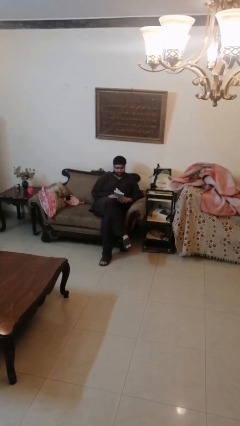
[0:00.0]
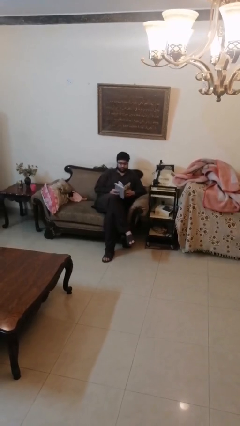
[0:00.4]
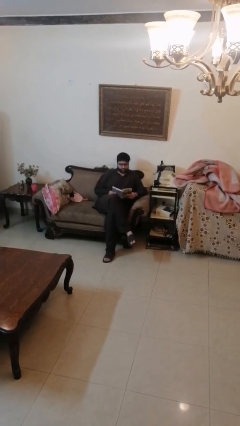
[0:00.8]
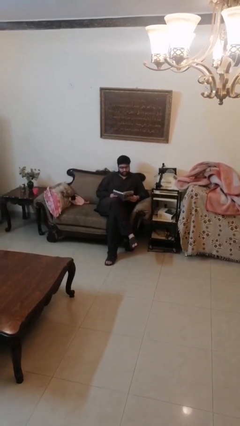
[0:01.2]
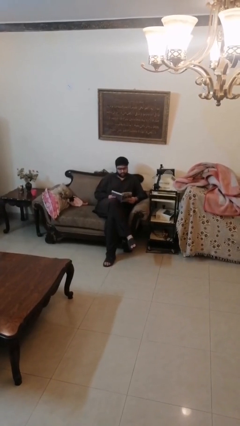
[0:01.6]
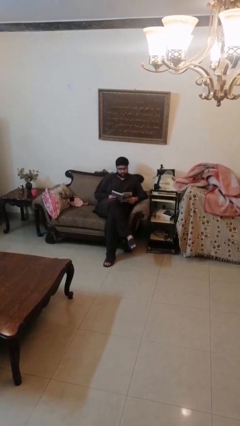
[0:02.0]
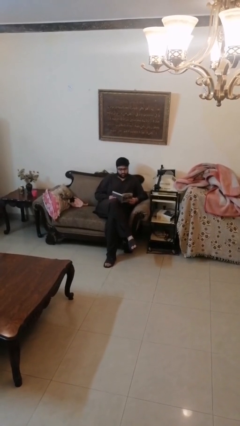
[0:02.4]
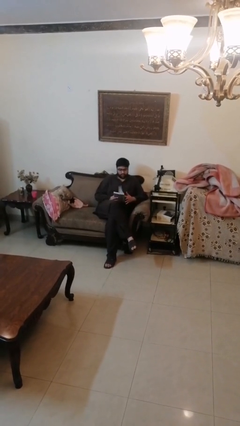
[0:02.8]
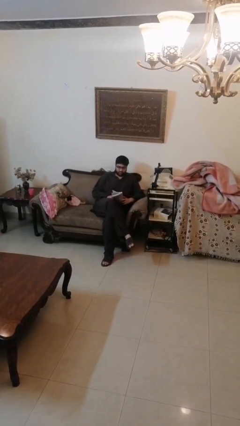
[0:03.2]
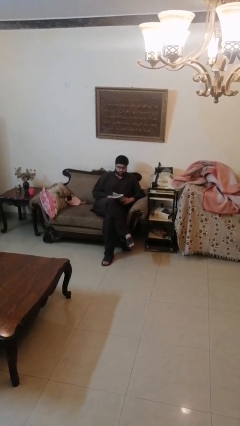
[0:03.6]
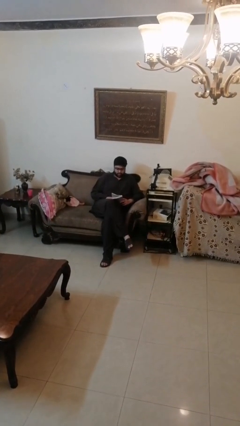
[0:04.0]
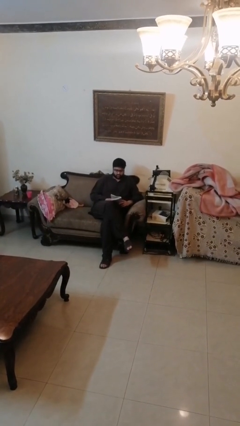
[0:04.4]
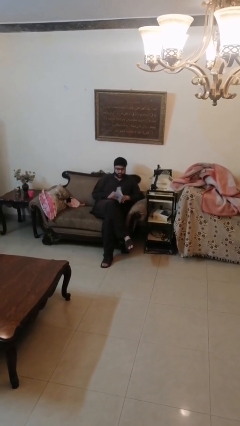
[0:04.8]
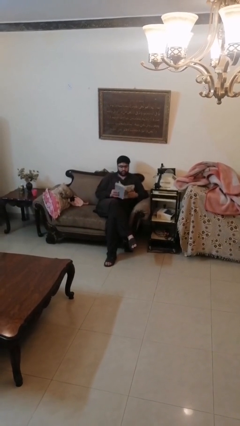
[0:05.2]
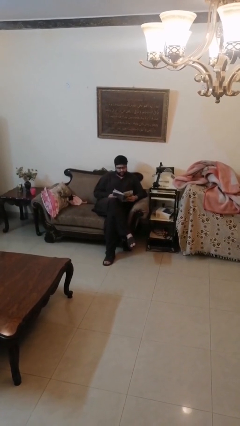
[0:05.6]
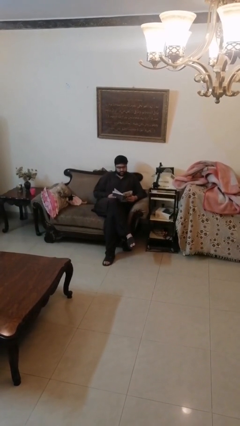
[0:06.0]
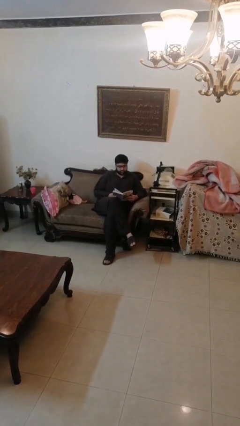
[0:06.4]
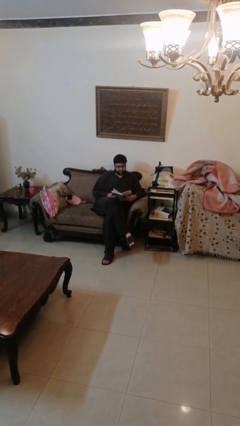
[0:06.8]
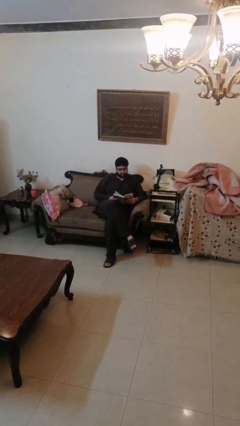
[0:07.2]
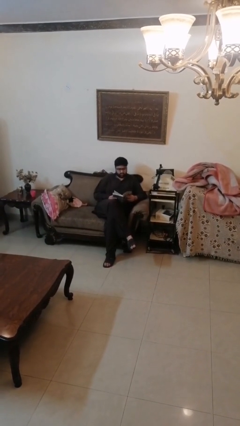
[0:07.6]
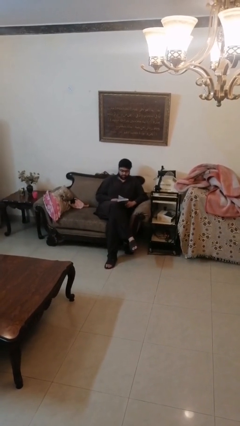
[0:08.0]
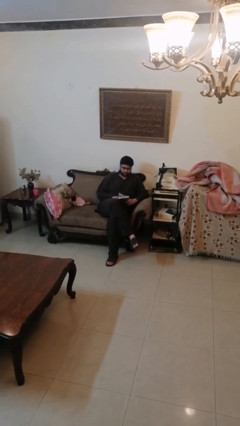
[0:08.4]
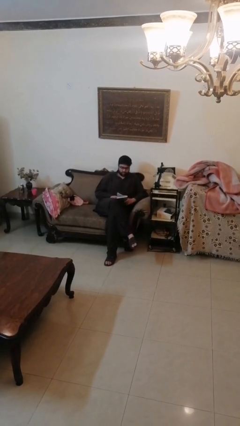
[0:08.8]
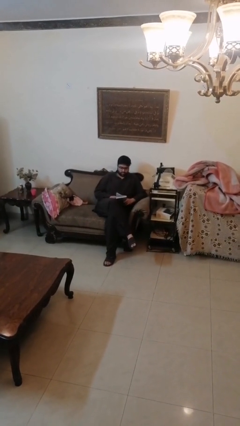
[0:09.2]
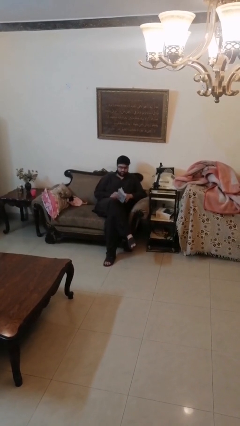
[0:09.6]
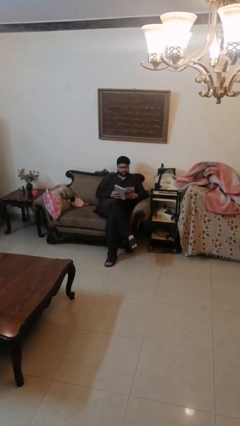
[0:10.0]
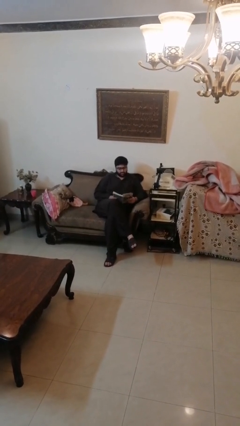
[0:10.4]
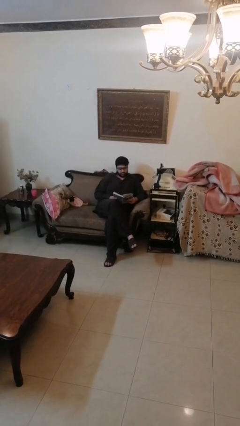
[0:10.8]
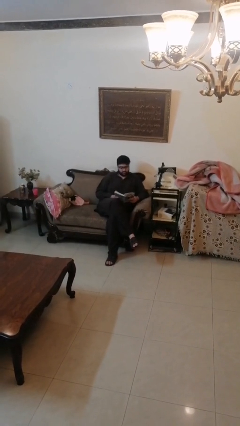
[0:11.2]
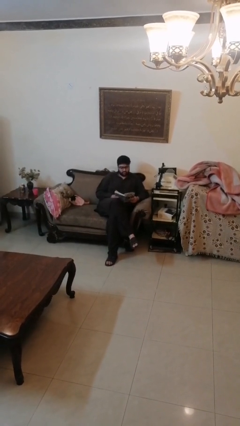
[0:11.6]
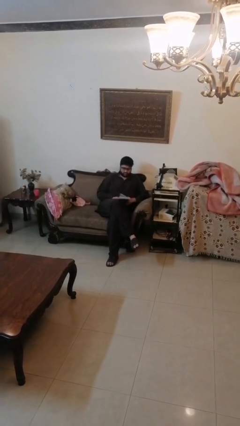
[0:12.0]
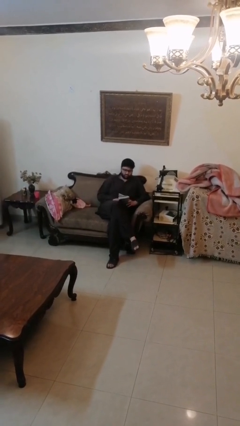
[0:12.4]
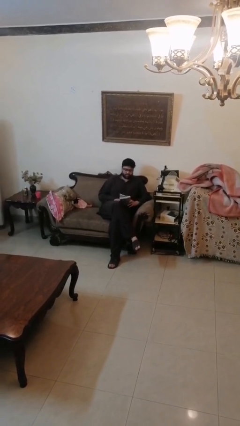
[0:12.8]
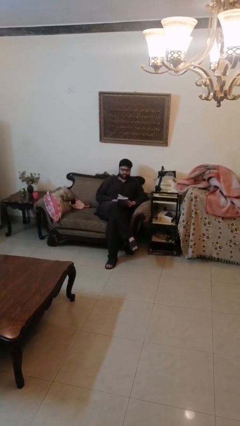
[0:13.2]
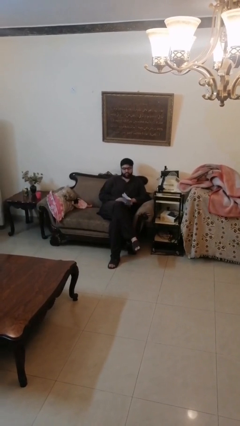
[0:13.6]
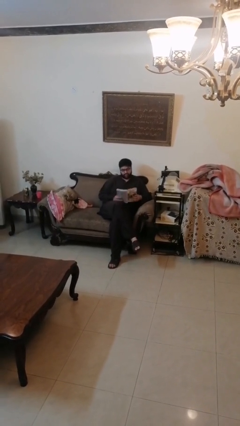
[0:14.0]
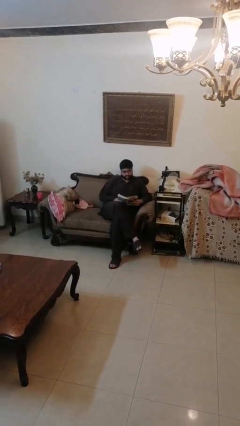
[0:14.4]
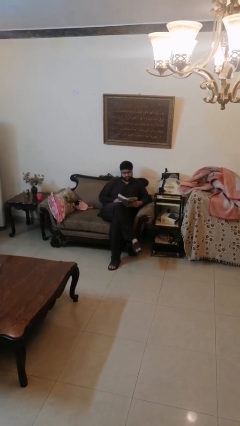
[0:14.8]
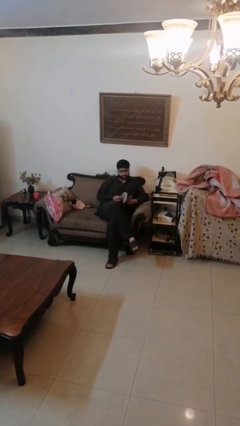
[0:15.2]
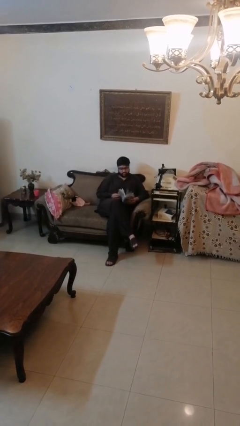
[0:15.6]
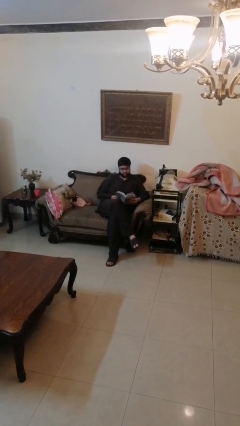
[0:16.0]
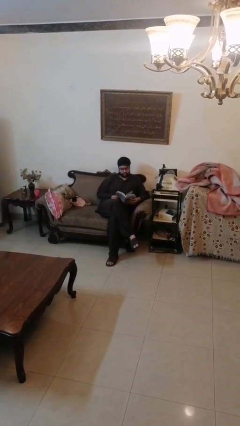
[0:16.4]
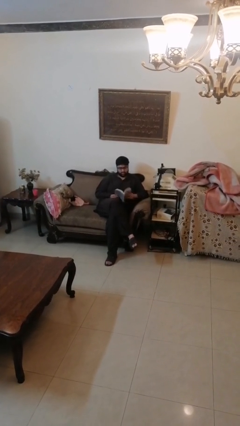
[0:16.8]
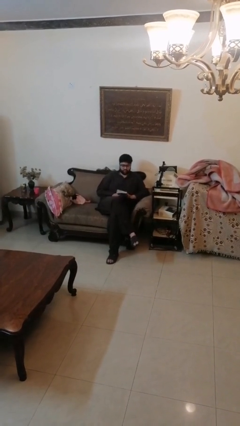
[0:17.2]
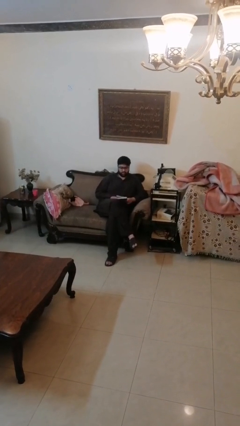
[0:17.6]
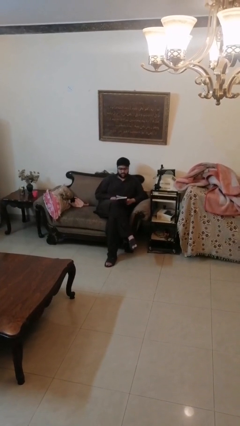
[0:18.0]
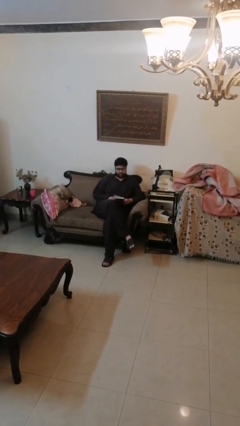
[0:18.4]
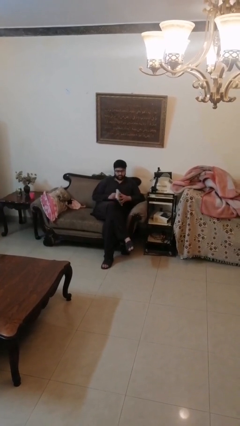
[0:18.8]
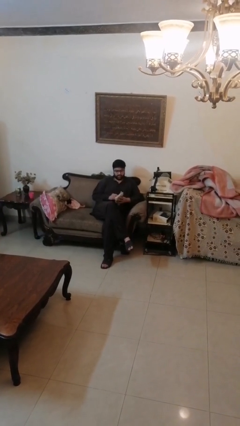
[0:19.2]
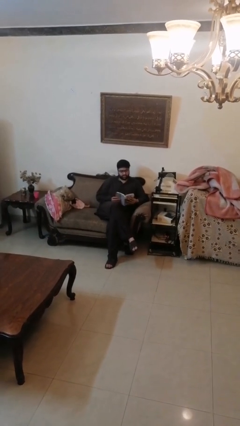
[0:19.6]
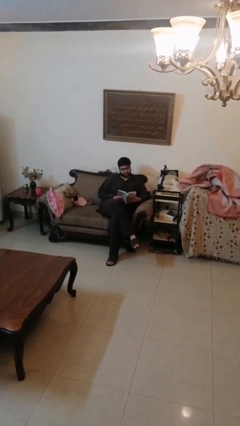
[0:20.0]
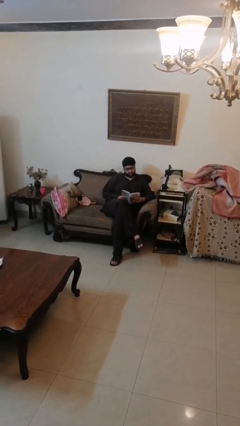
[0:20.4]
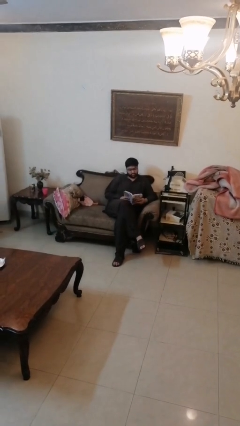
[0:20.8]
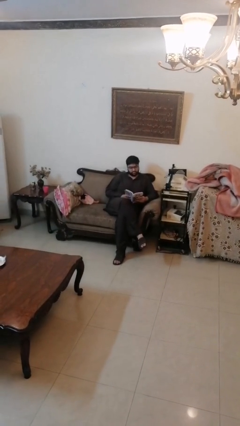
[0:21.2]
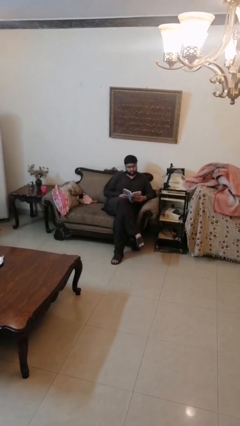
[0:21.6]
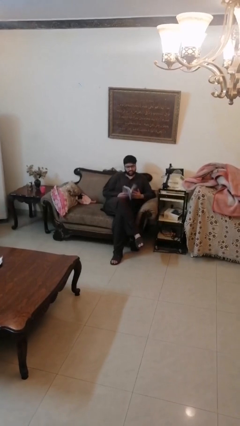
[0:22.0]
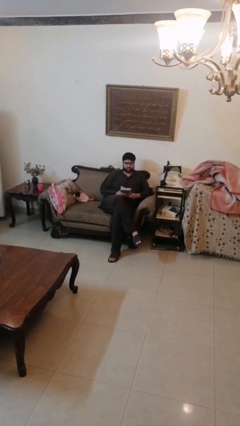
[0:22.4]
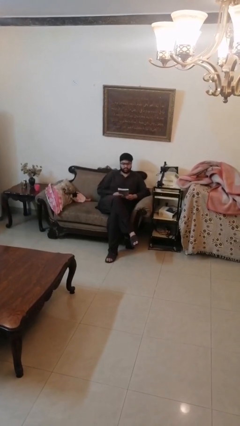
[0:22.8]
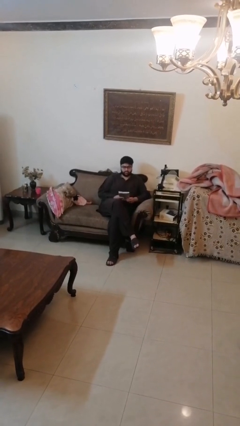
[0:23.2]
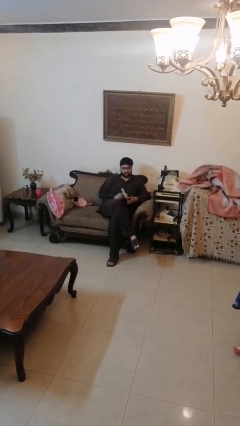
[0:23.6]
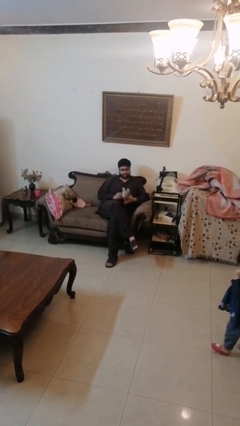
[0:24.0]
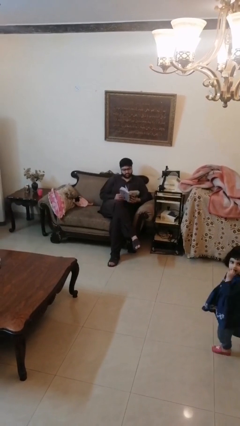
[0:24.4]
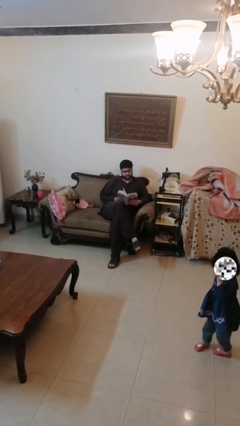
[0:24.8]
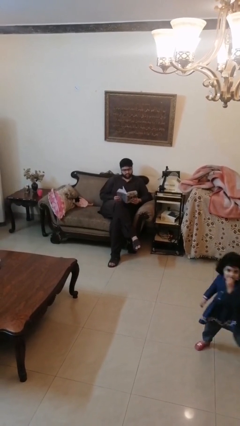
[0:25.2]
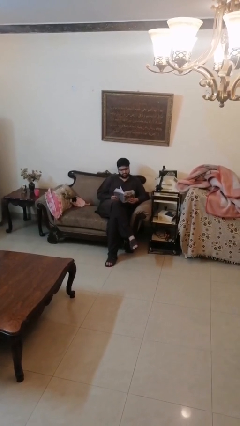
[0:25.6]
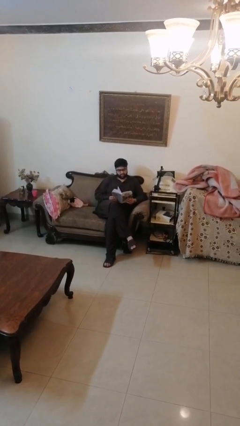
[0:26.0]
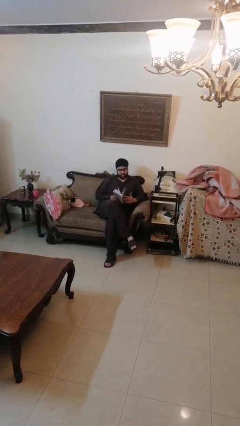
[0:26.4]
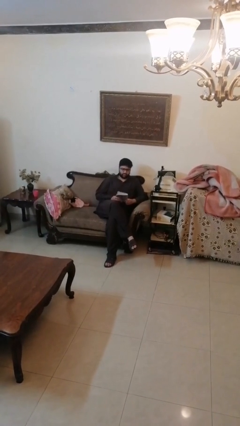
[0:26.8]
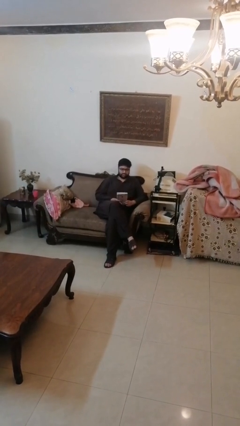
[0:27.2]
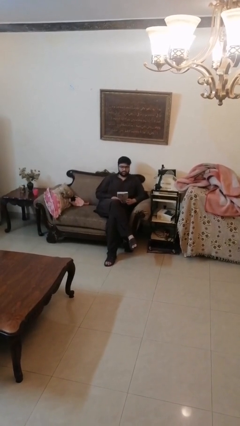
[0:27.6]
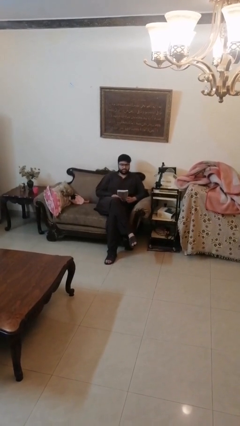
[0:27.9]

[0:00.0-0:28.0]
person reads document

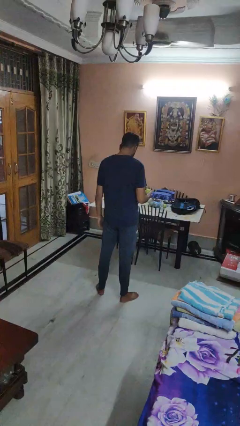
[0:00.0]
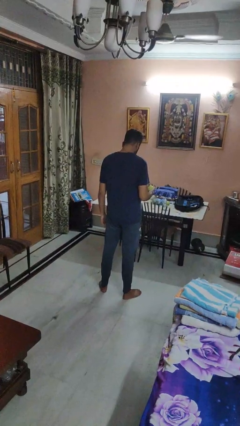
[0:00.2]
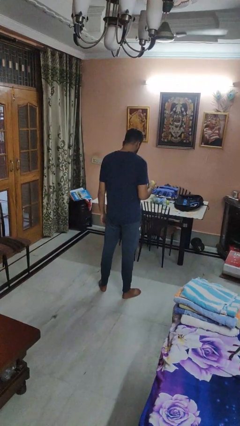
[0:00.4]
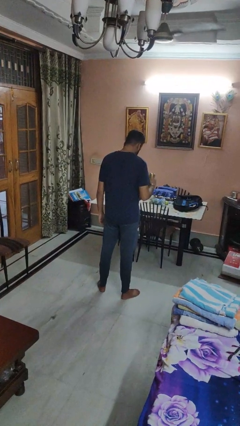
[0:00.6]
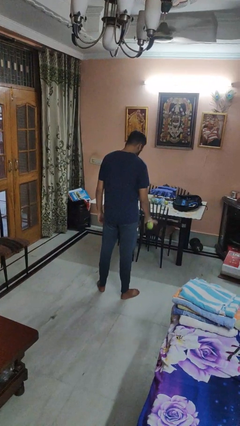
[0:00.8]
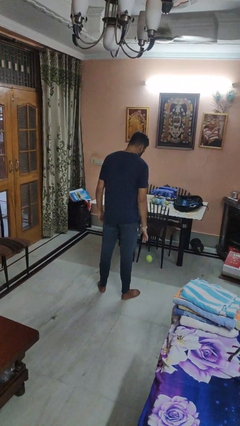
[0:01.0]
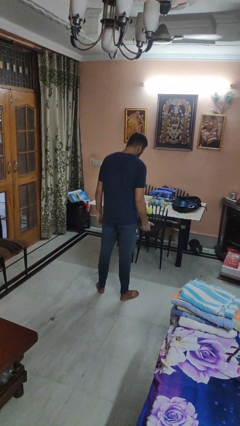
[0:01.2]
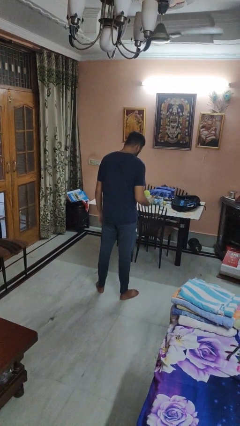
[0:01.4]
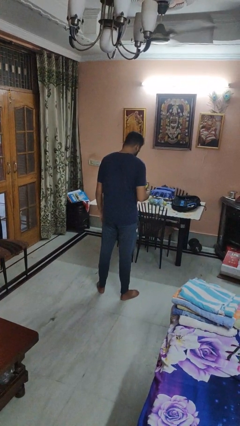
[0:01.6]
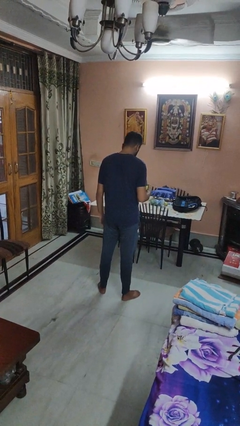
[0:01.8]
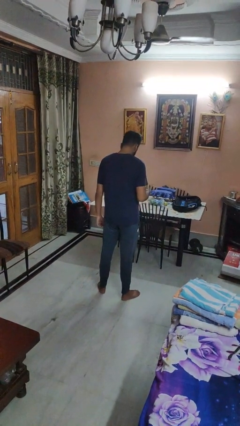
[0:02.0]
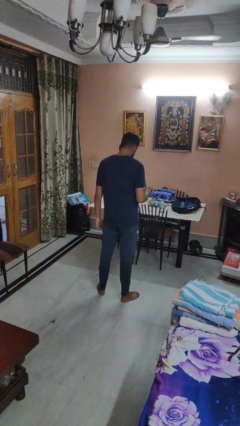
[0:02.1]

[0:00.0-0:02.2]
person bounces ball on floor

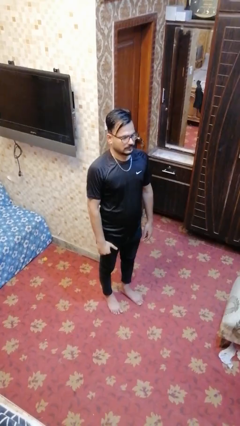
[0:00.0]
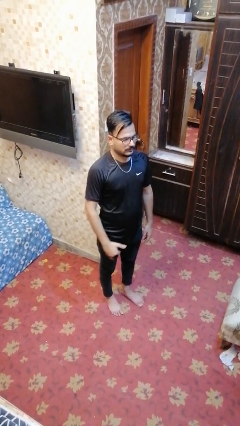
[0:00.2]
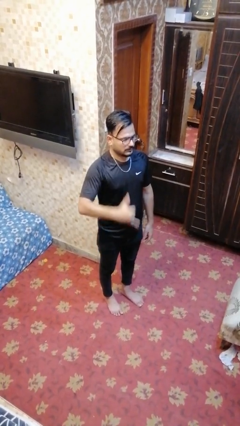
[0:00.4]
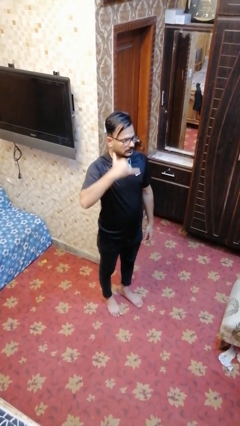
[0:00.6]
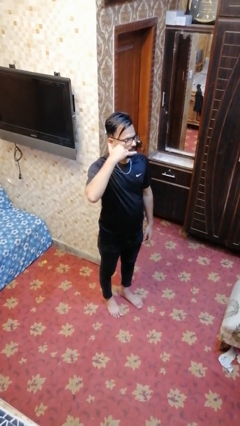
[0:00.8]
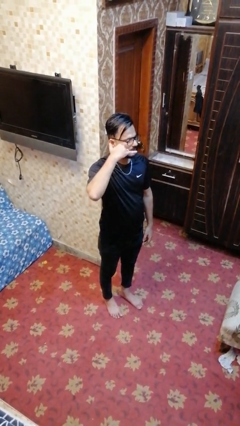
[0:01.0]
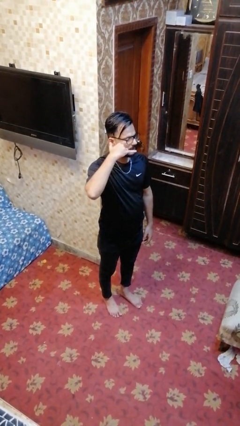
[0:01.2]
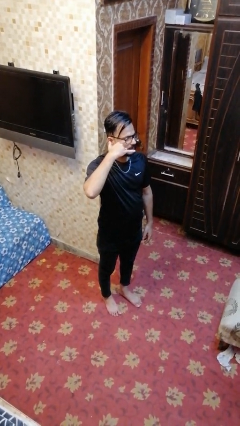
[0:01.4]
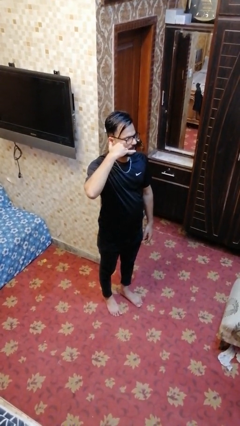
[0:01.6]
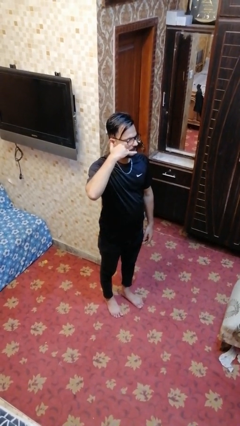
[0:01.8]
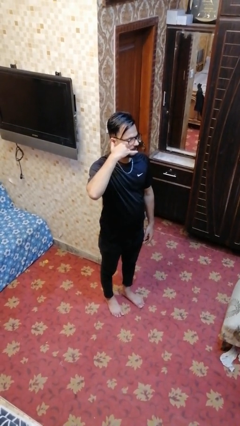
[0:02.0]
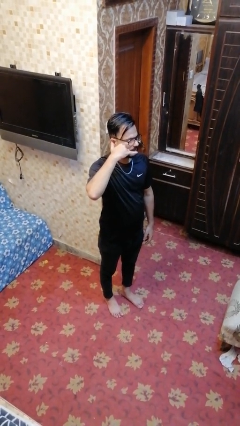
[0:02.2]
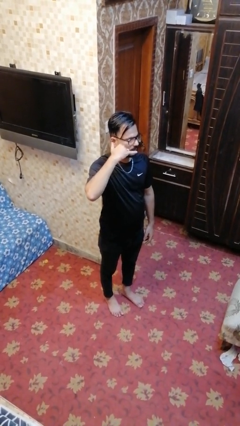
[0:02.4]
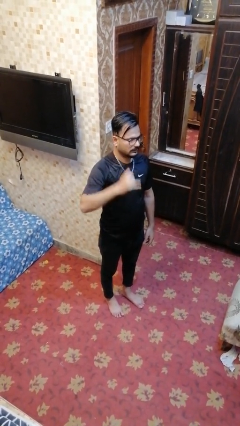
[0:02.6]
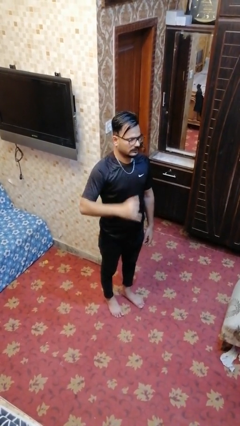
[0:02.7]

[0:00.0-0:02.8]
person gestures call me
